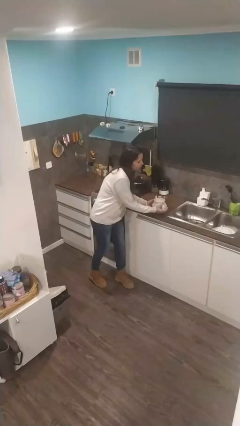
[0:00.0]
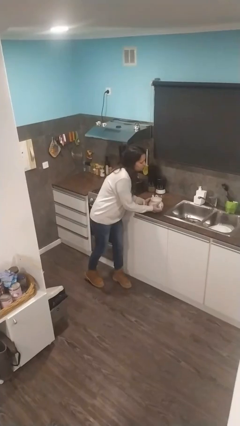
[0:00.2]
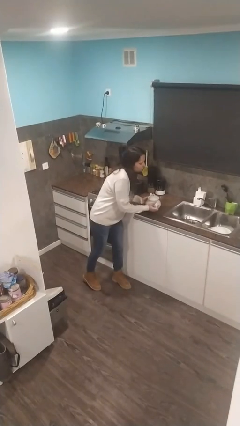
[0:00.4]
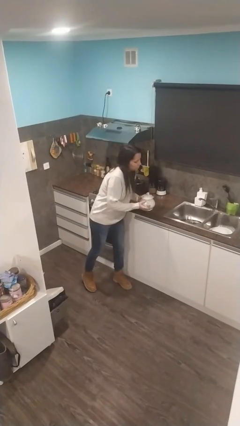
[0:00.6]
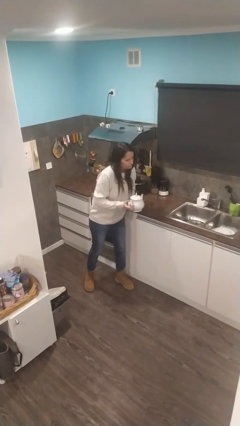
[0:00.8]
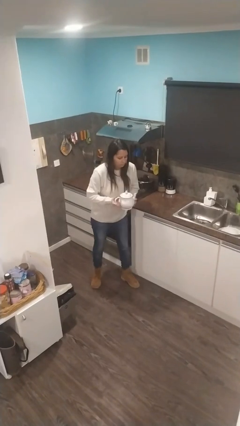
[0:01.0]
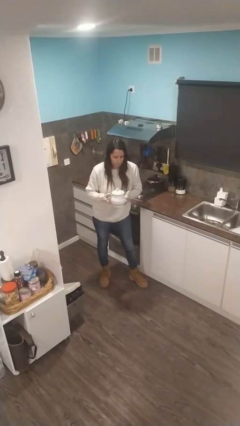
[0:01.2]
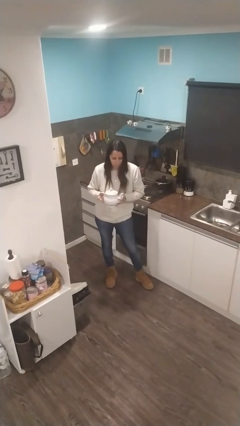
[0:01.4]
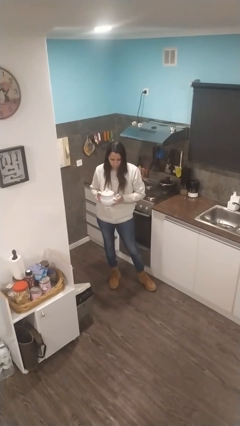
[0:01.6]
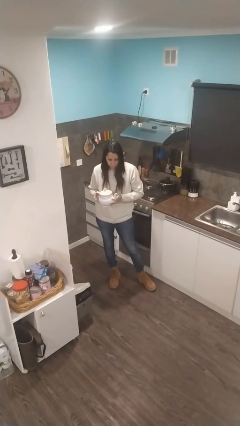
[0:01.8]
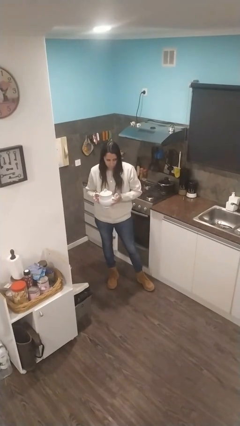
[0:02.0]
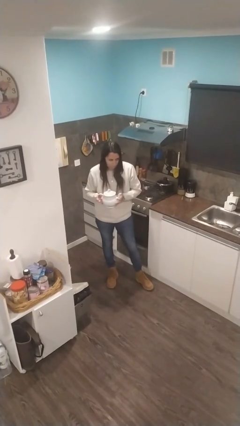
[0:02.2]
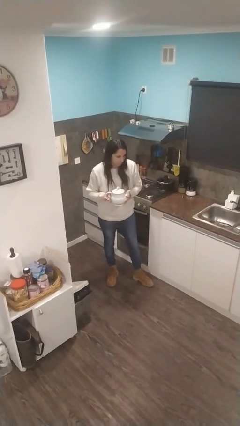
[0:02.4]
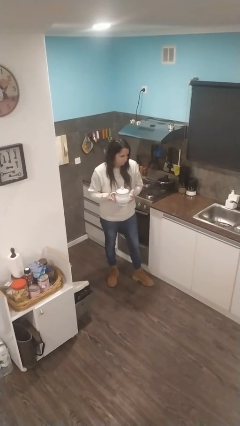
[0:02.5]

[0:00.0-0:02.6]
person picks up object from countertop

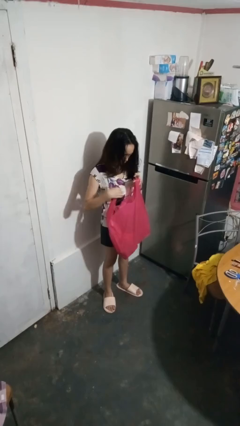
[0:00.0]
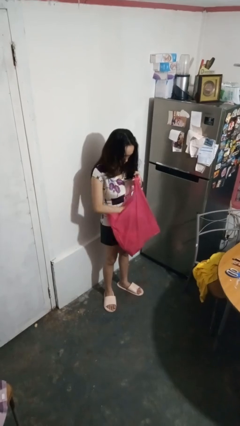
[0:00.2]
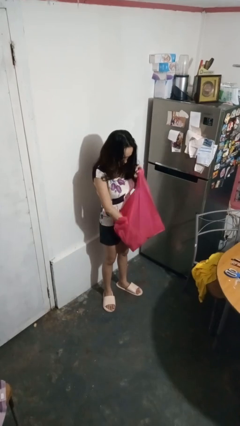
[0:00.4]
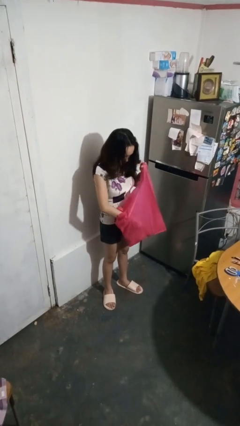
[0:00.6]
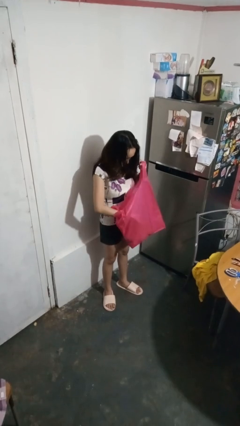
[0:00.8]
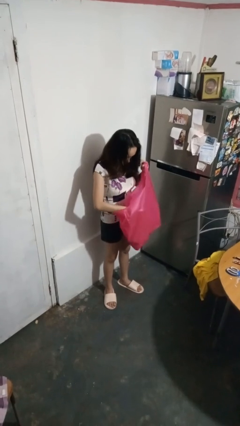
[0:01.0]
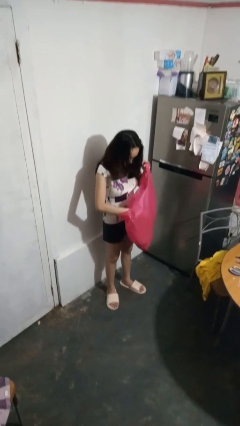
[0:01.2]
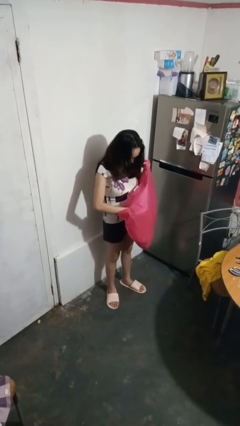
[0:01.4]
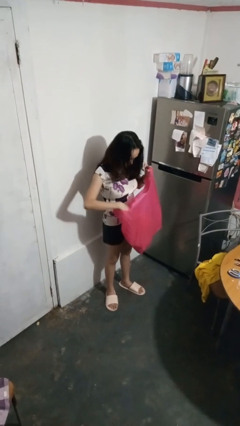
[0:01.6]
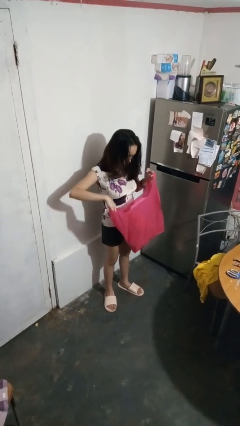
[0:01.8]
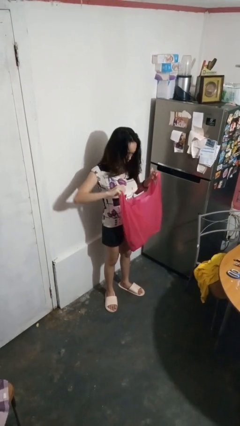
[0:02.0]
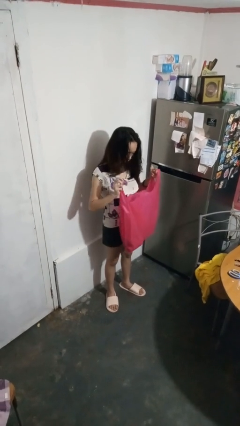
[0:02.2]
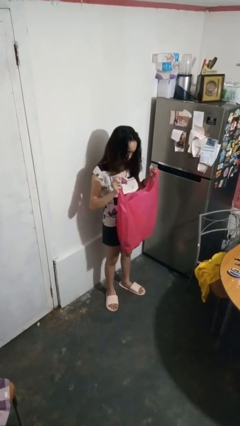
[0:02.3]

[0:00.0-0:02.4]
person searches in box

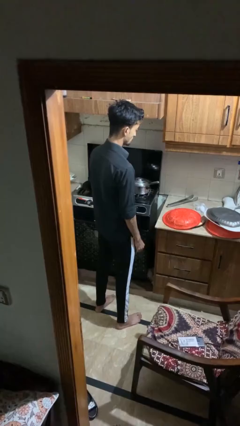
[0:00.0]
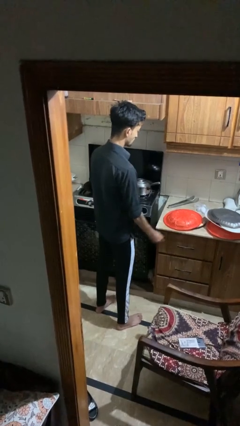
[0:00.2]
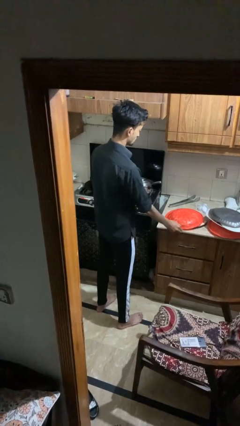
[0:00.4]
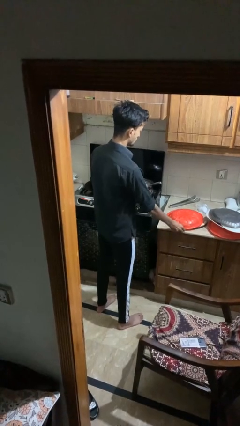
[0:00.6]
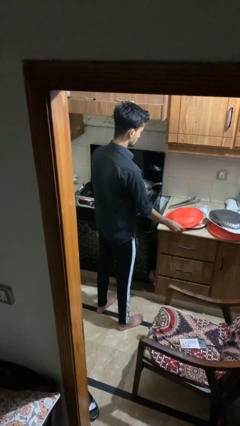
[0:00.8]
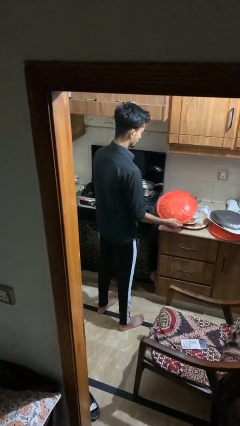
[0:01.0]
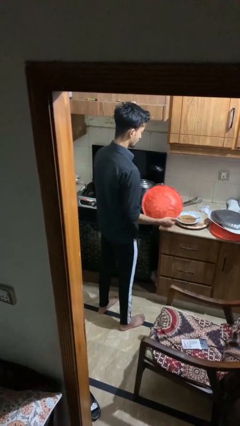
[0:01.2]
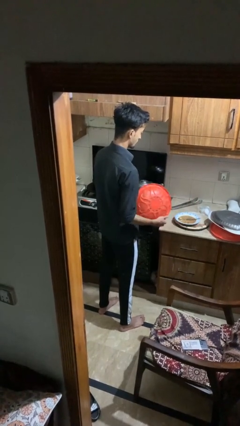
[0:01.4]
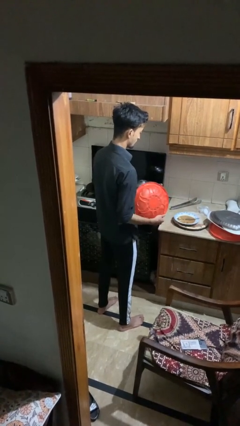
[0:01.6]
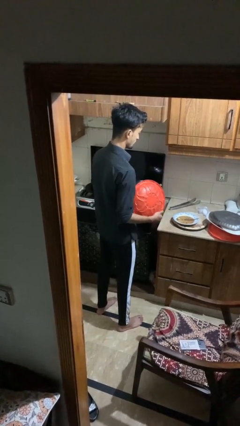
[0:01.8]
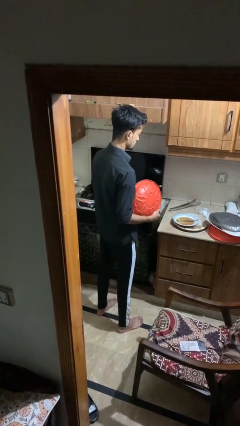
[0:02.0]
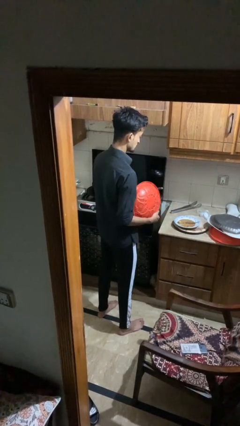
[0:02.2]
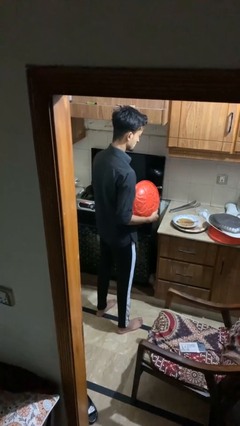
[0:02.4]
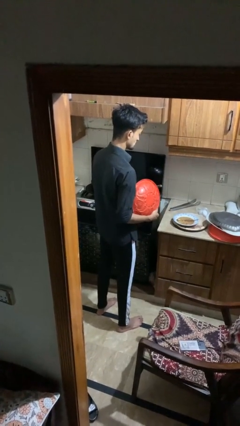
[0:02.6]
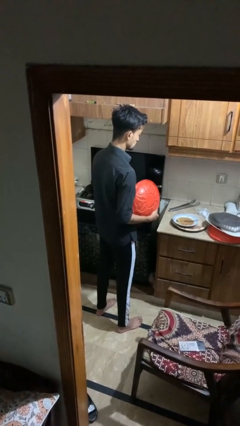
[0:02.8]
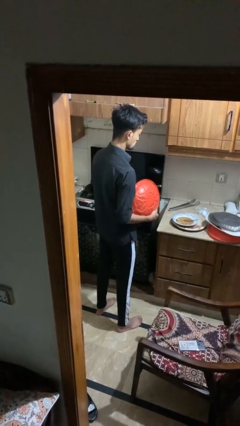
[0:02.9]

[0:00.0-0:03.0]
person picks up object from shelf

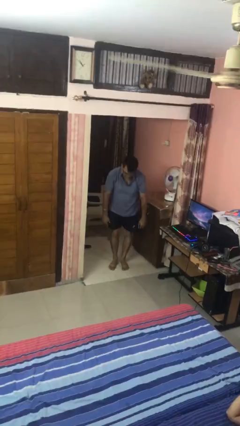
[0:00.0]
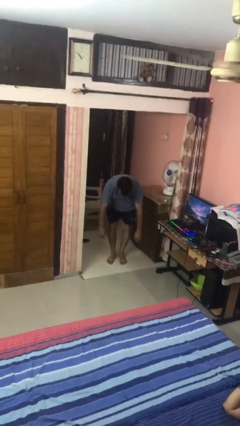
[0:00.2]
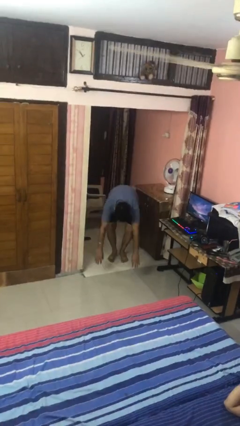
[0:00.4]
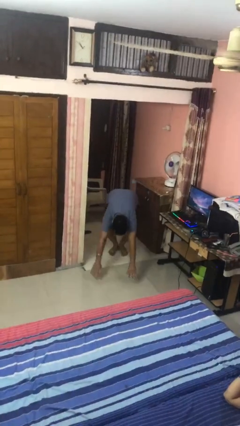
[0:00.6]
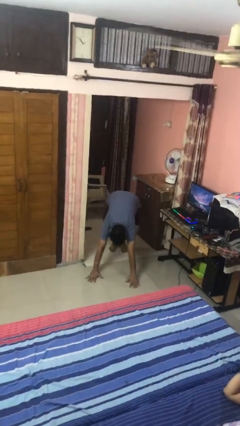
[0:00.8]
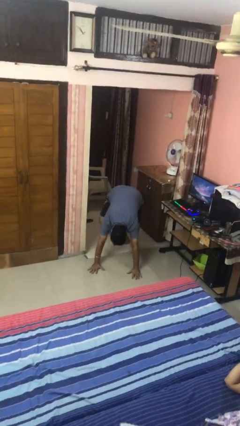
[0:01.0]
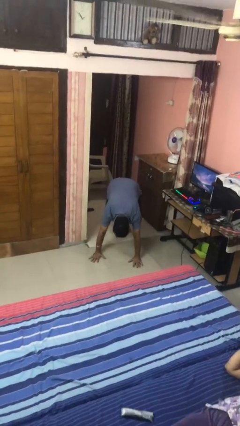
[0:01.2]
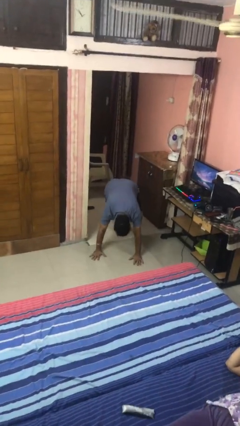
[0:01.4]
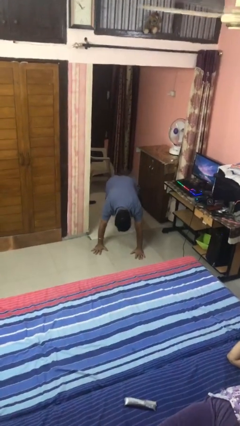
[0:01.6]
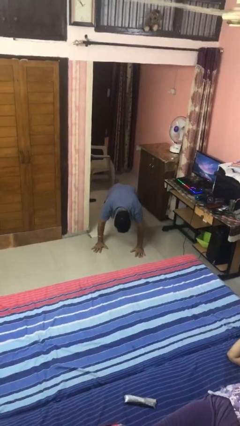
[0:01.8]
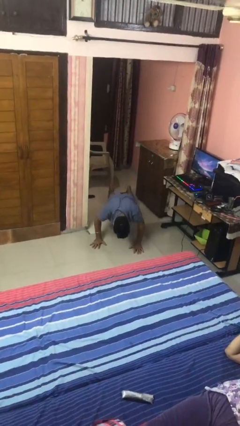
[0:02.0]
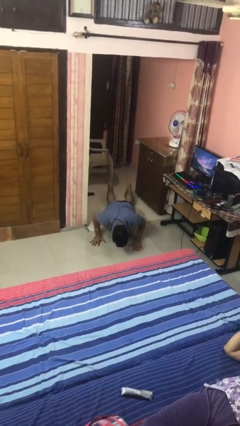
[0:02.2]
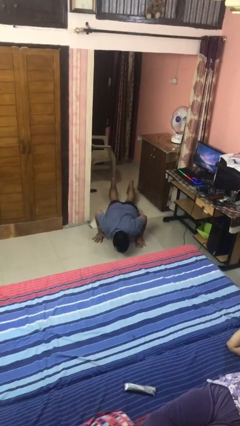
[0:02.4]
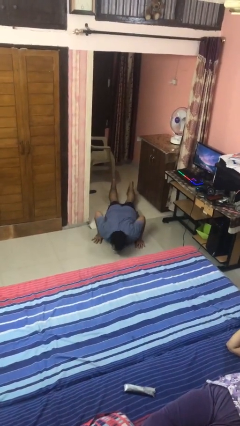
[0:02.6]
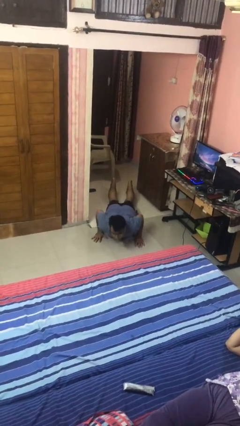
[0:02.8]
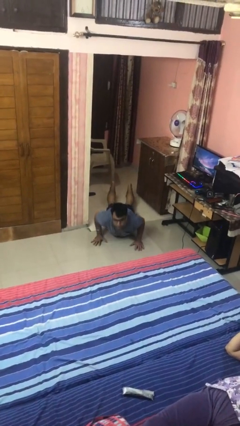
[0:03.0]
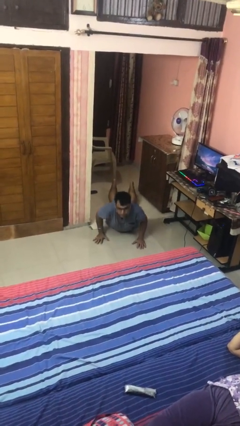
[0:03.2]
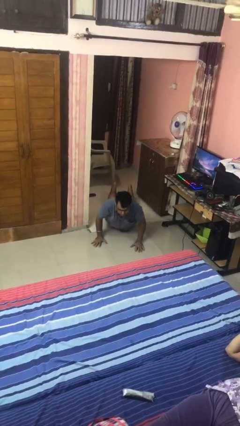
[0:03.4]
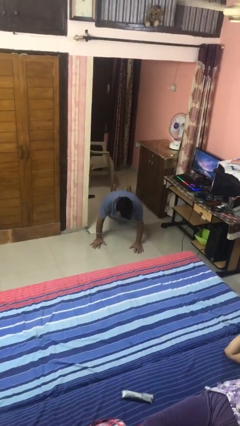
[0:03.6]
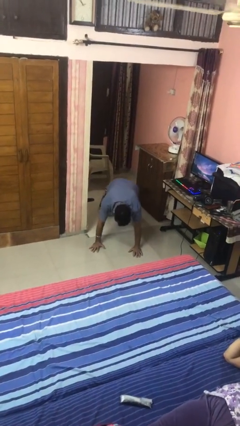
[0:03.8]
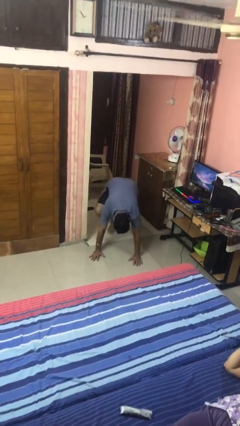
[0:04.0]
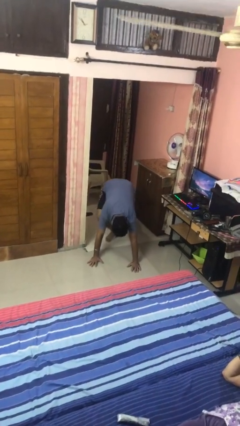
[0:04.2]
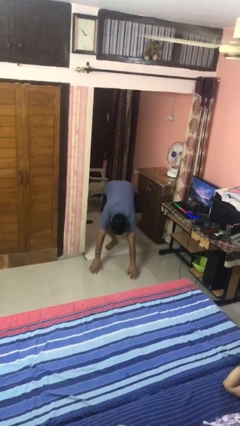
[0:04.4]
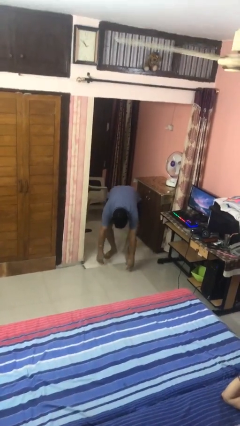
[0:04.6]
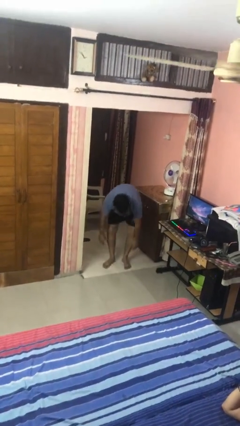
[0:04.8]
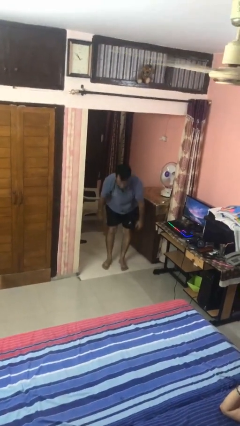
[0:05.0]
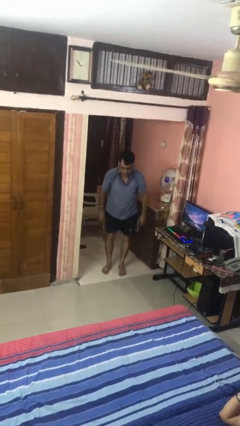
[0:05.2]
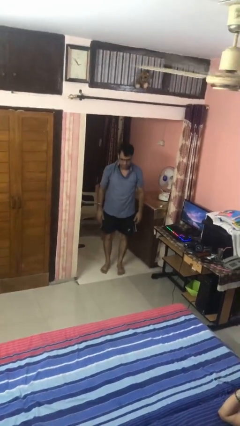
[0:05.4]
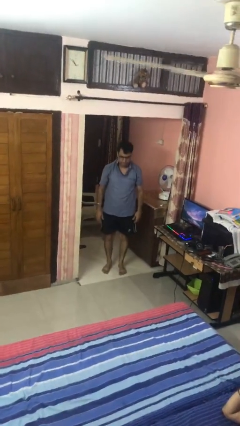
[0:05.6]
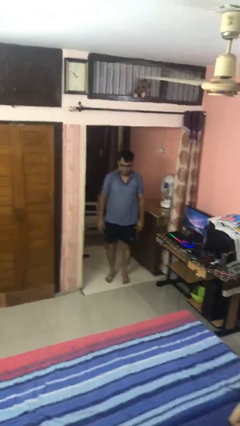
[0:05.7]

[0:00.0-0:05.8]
person exercises with pushup

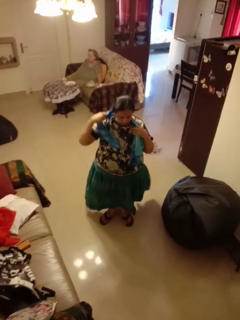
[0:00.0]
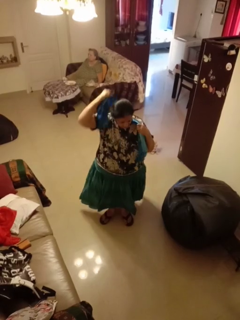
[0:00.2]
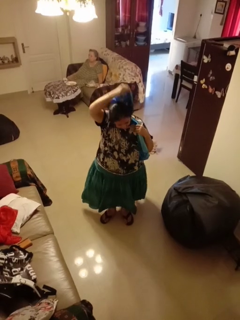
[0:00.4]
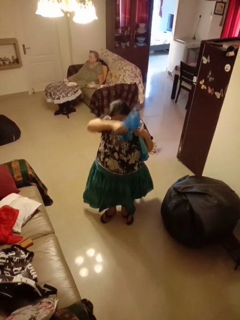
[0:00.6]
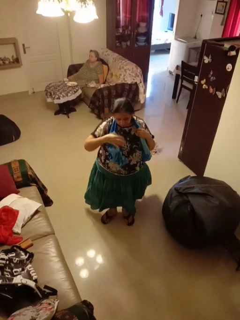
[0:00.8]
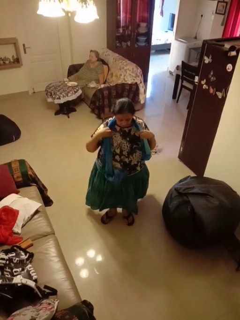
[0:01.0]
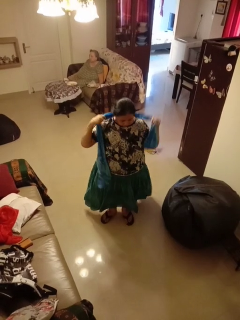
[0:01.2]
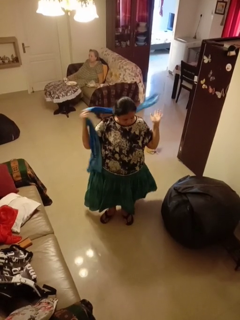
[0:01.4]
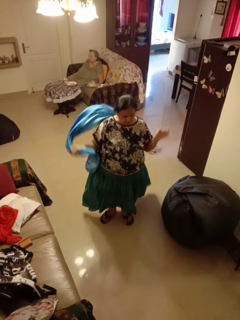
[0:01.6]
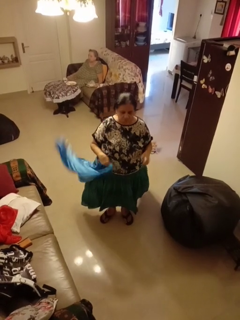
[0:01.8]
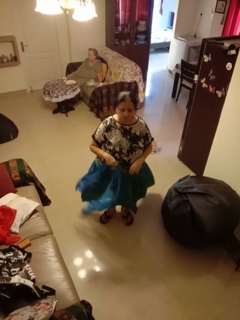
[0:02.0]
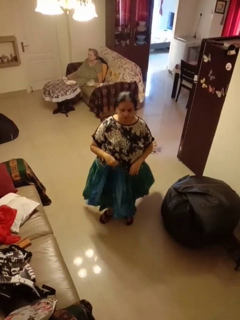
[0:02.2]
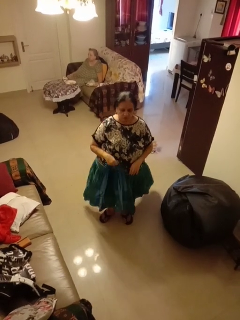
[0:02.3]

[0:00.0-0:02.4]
person takes off scarf

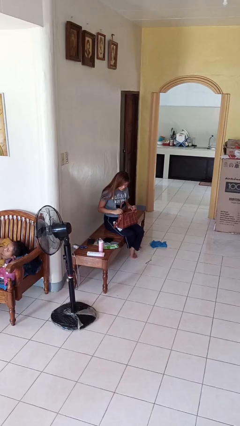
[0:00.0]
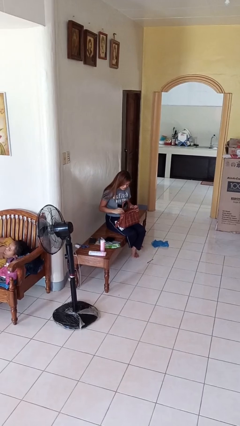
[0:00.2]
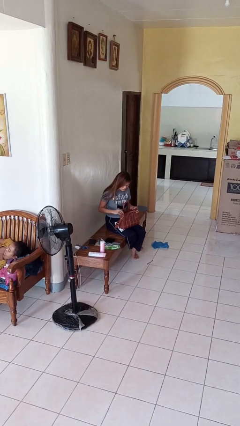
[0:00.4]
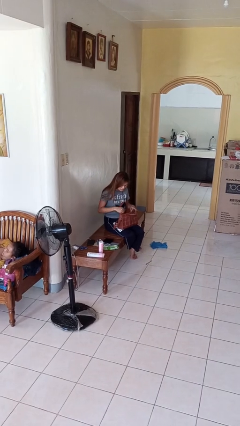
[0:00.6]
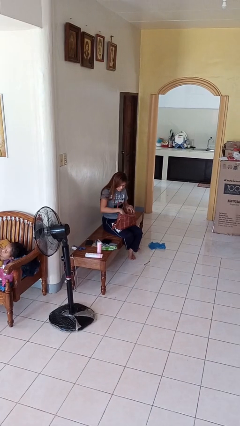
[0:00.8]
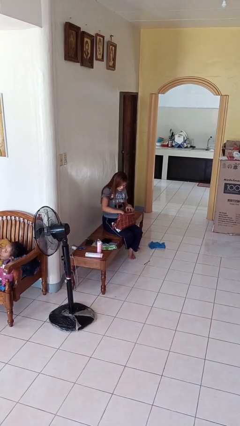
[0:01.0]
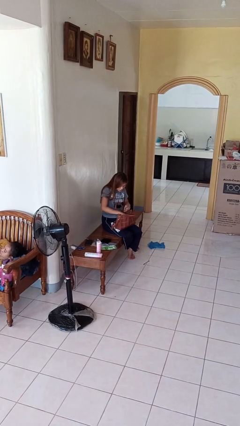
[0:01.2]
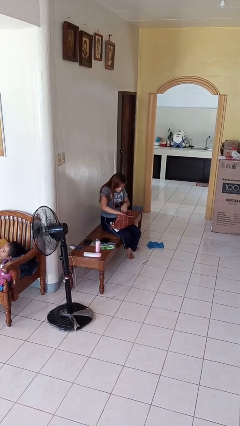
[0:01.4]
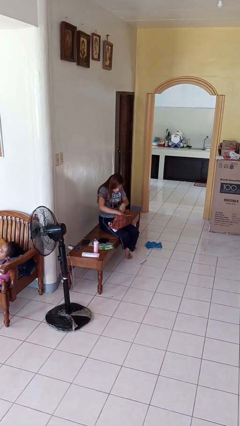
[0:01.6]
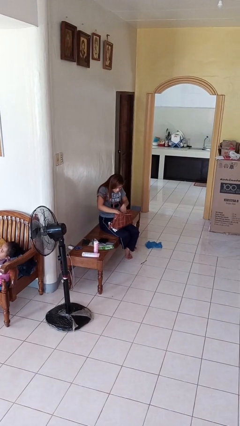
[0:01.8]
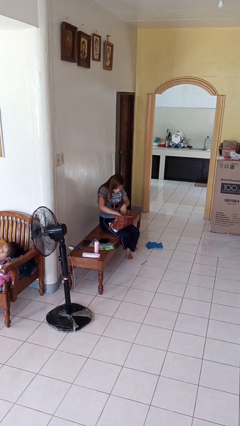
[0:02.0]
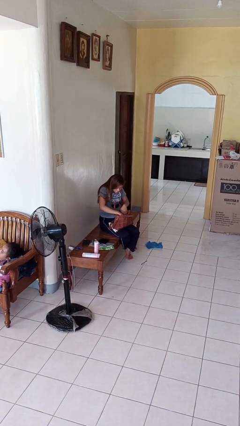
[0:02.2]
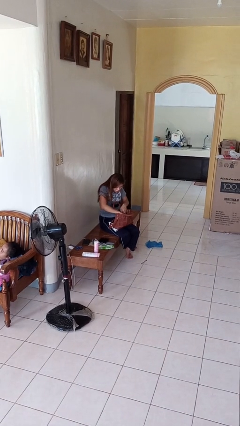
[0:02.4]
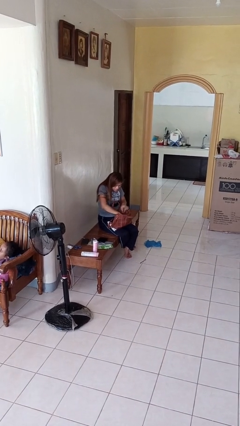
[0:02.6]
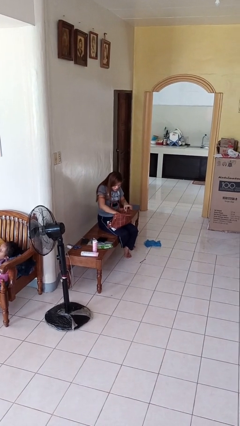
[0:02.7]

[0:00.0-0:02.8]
person searches in purse
